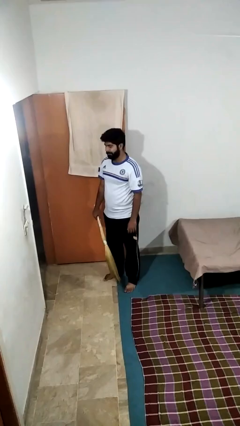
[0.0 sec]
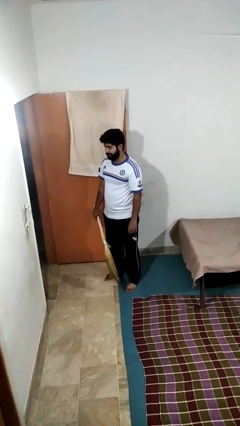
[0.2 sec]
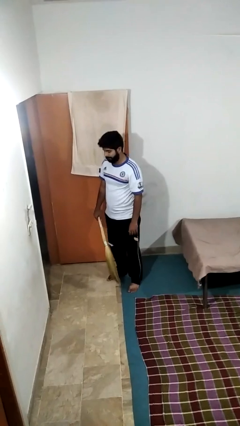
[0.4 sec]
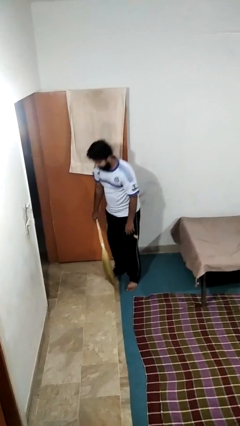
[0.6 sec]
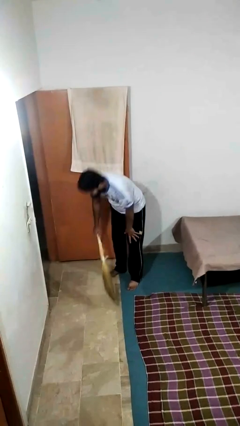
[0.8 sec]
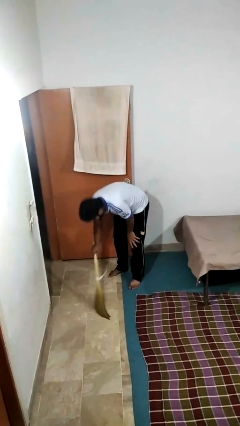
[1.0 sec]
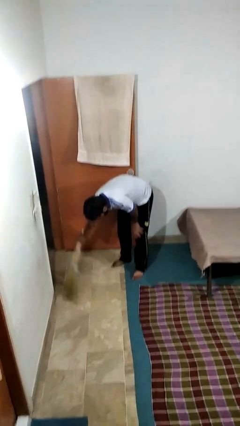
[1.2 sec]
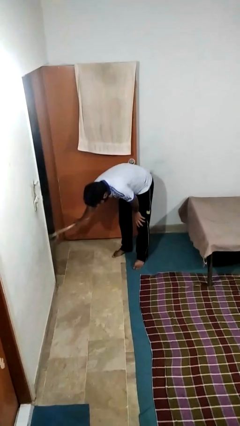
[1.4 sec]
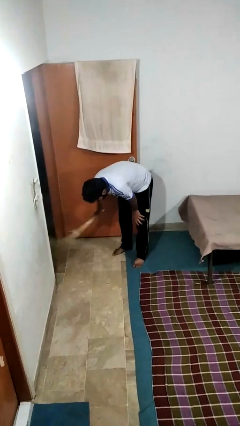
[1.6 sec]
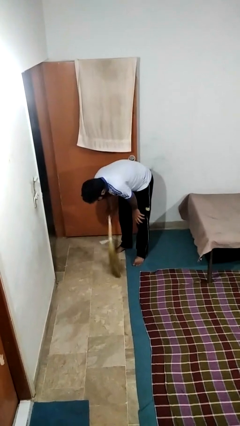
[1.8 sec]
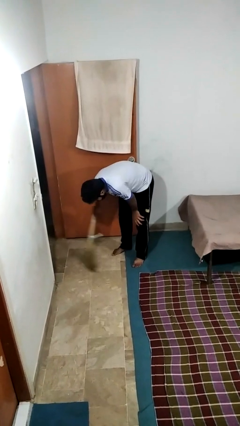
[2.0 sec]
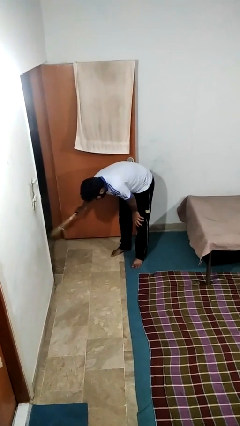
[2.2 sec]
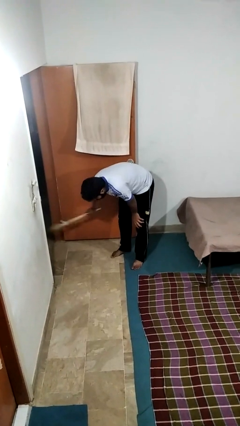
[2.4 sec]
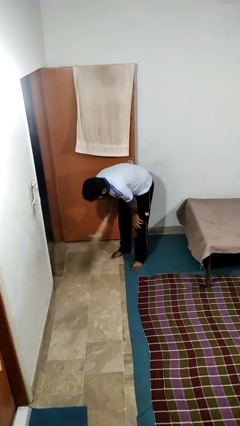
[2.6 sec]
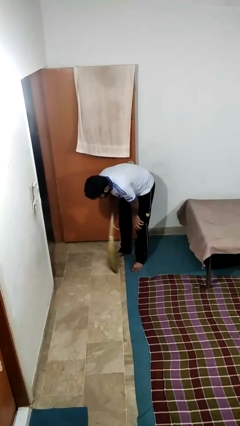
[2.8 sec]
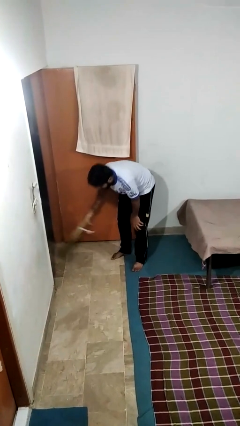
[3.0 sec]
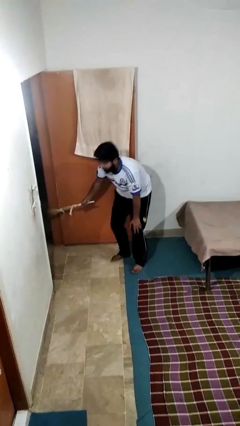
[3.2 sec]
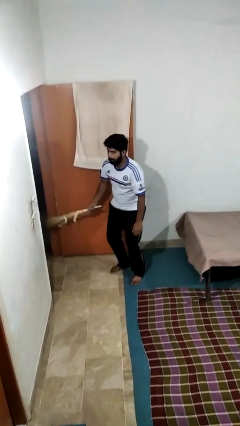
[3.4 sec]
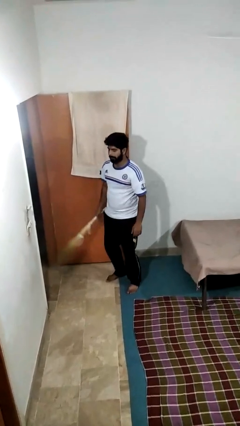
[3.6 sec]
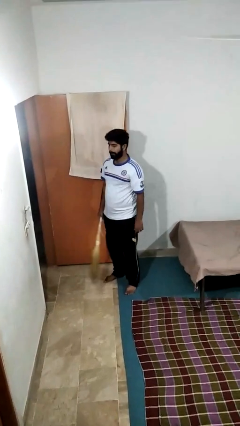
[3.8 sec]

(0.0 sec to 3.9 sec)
person sweeps floor

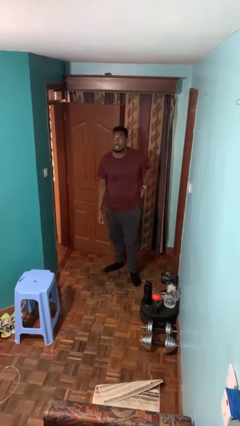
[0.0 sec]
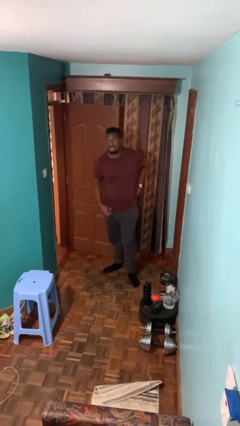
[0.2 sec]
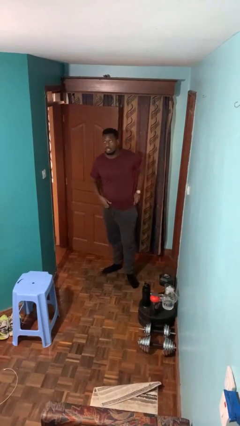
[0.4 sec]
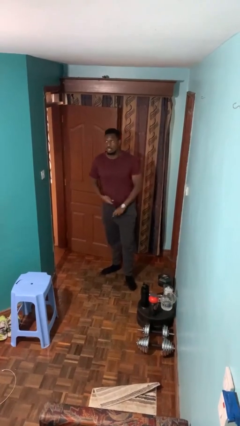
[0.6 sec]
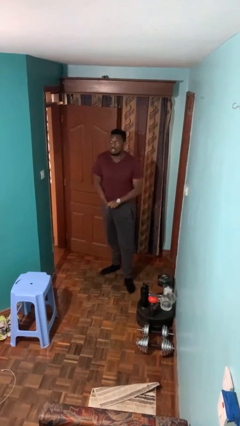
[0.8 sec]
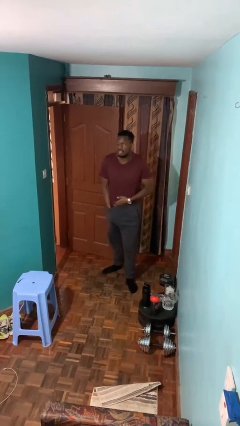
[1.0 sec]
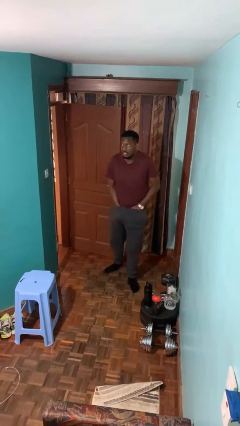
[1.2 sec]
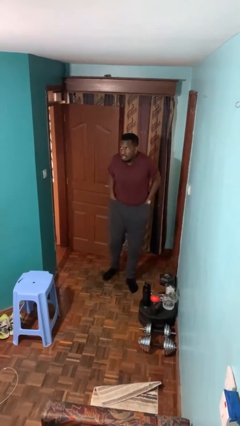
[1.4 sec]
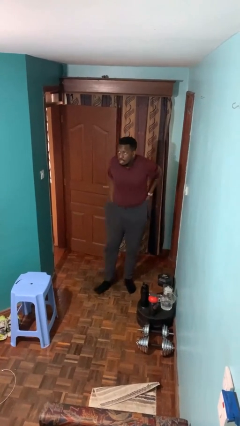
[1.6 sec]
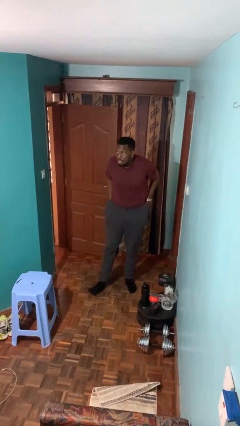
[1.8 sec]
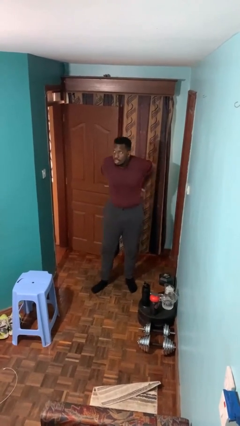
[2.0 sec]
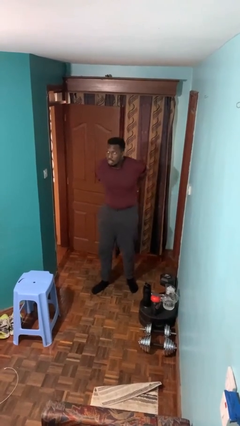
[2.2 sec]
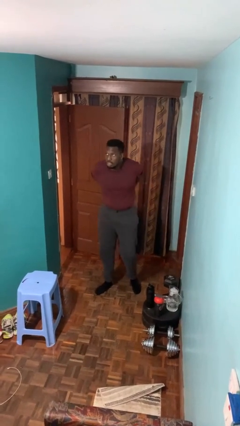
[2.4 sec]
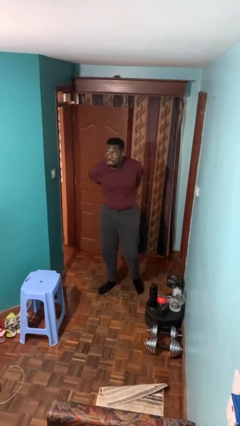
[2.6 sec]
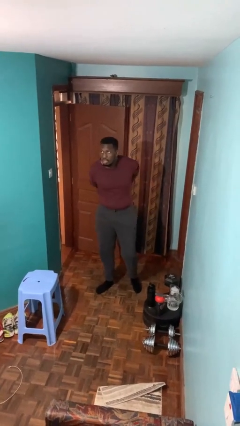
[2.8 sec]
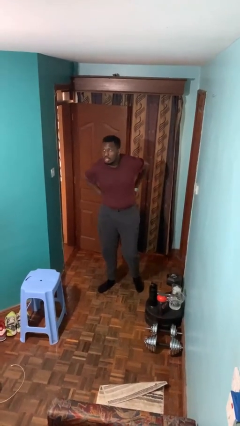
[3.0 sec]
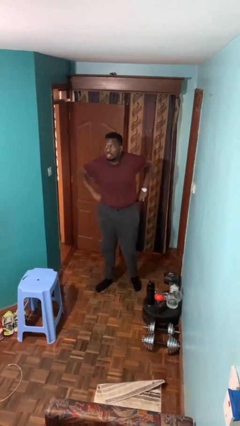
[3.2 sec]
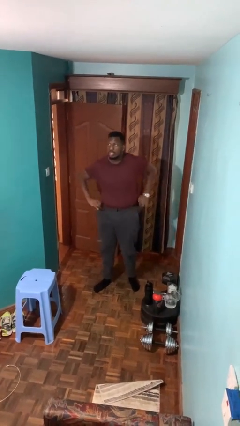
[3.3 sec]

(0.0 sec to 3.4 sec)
person tucks in shirt

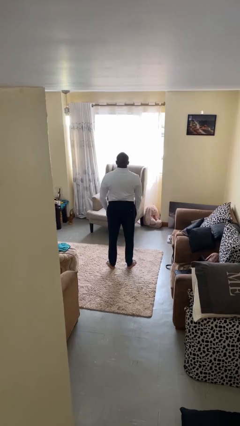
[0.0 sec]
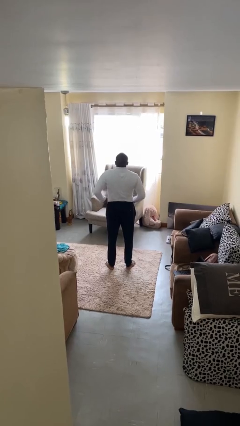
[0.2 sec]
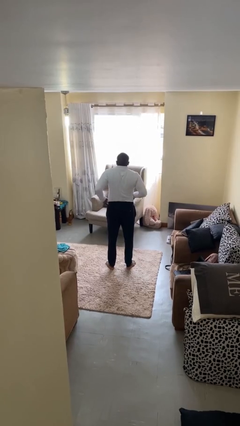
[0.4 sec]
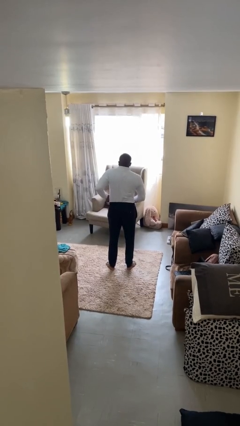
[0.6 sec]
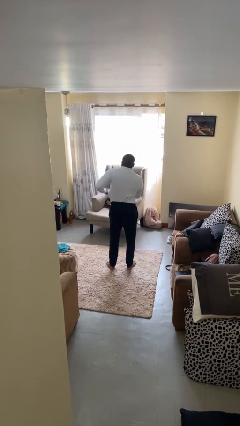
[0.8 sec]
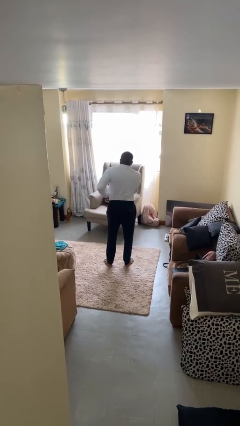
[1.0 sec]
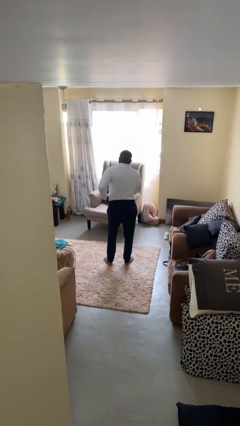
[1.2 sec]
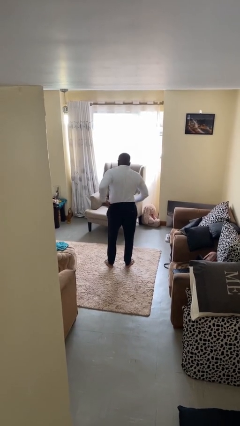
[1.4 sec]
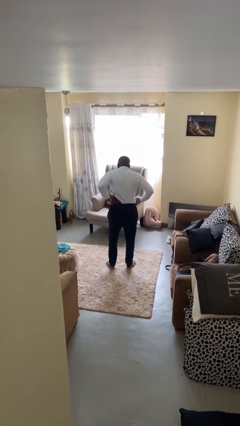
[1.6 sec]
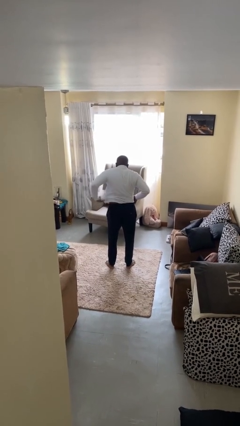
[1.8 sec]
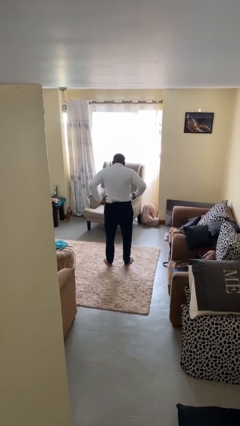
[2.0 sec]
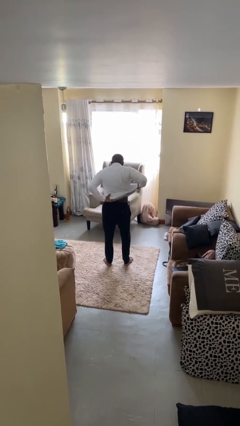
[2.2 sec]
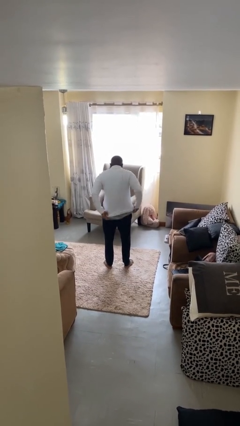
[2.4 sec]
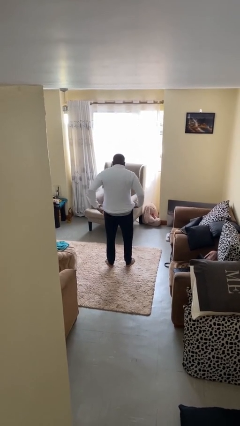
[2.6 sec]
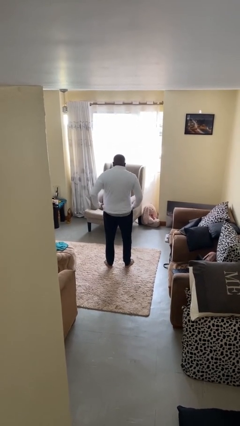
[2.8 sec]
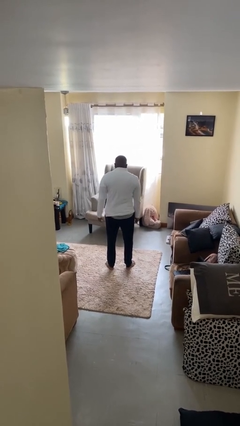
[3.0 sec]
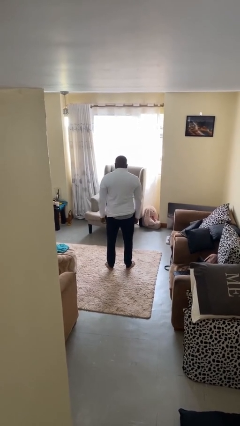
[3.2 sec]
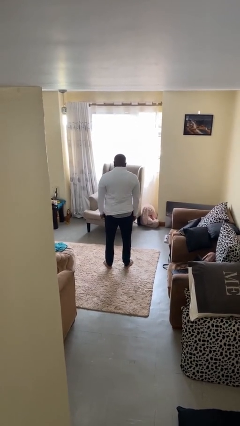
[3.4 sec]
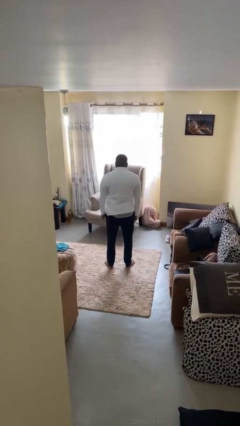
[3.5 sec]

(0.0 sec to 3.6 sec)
person untucks shirt

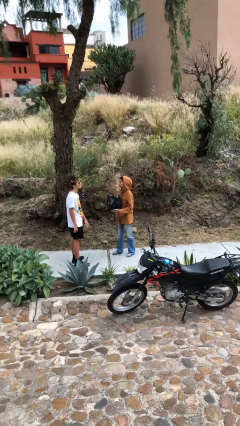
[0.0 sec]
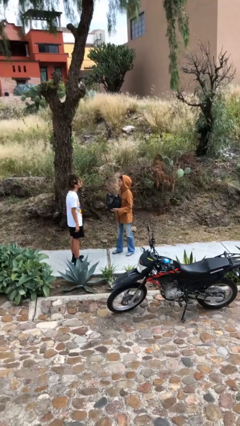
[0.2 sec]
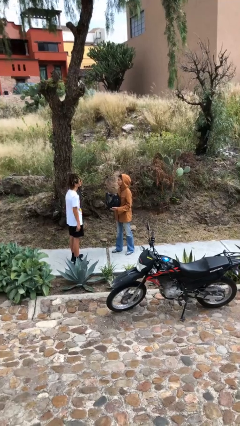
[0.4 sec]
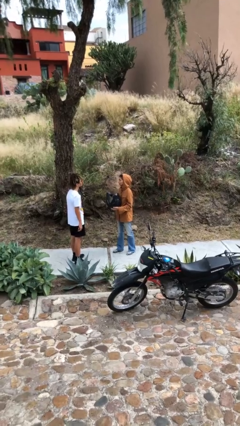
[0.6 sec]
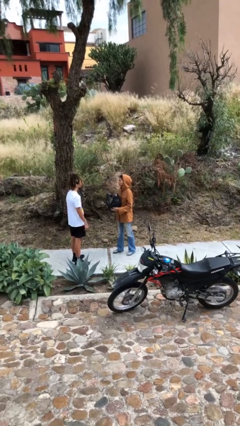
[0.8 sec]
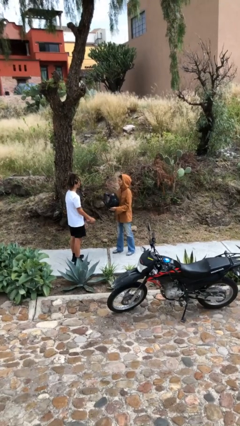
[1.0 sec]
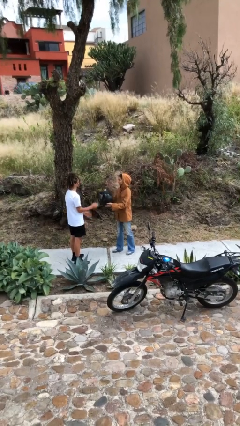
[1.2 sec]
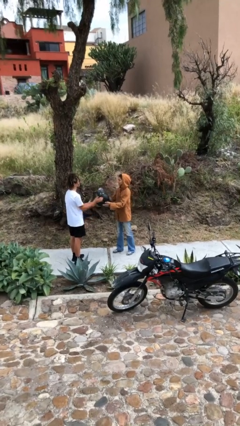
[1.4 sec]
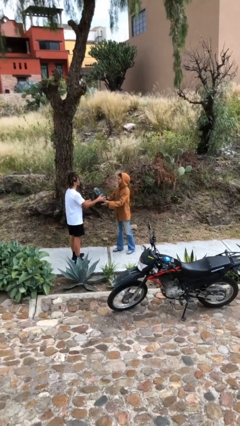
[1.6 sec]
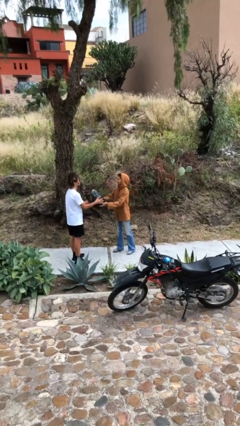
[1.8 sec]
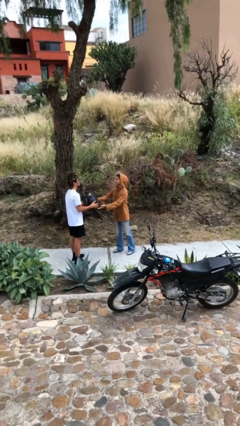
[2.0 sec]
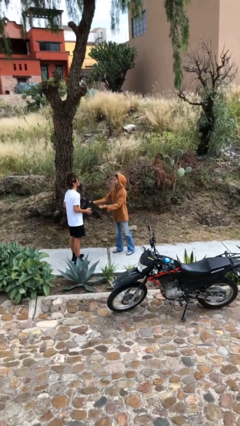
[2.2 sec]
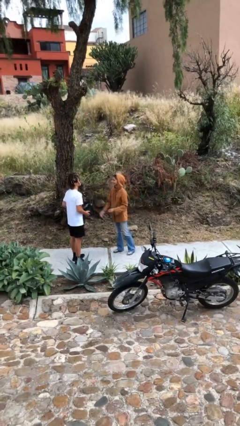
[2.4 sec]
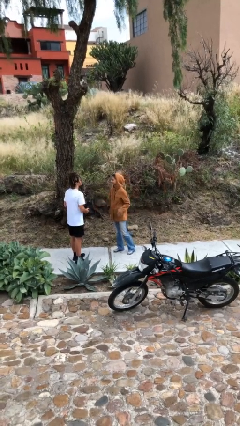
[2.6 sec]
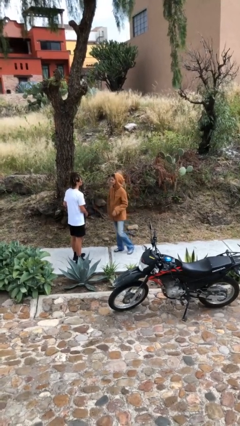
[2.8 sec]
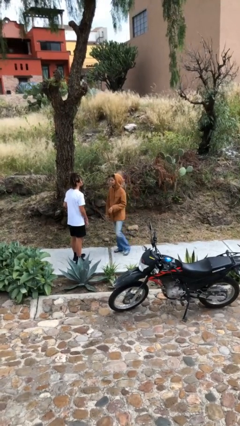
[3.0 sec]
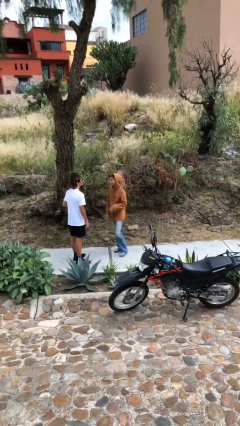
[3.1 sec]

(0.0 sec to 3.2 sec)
person transfers object to person

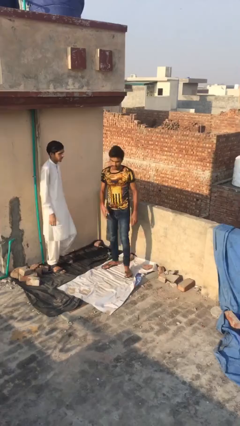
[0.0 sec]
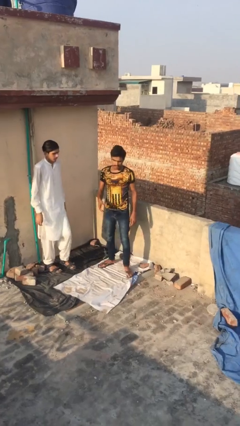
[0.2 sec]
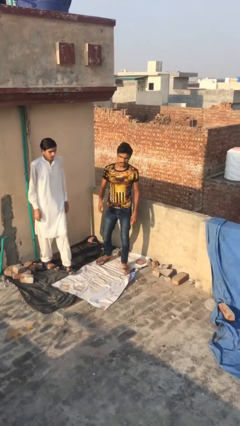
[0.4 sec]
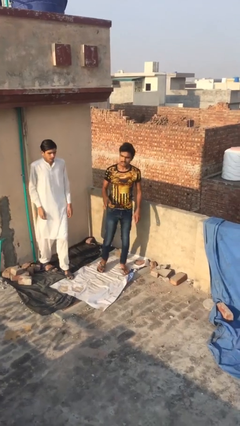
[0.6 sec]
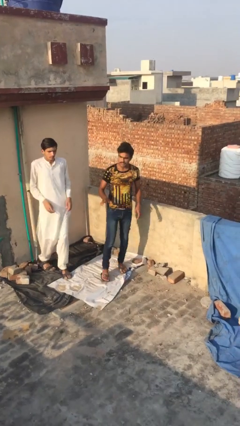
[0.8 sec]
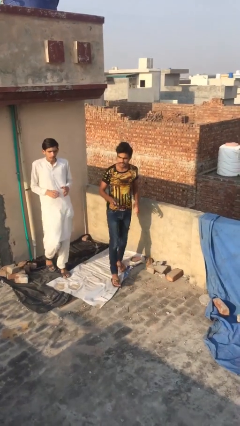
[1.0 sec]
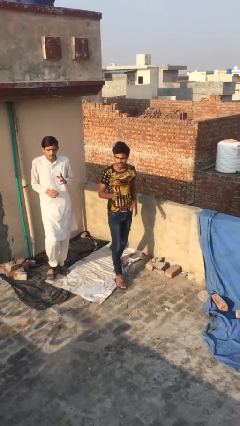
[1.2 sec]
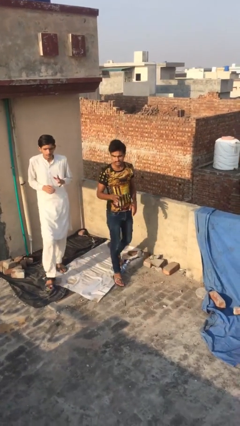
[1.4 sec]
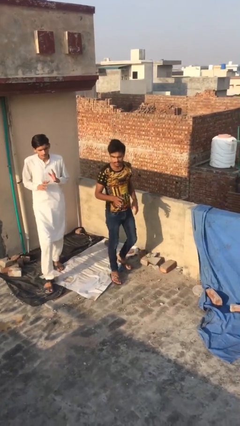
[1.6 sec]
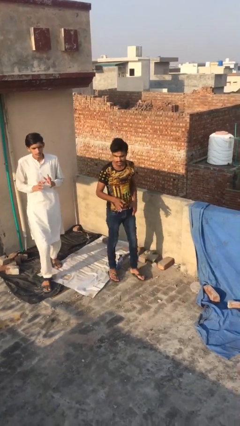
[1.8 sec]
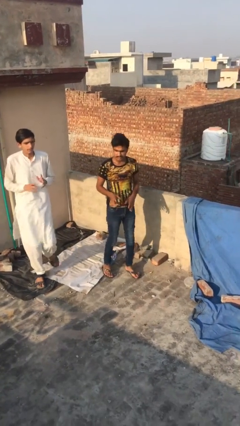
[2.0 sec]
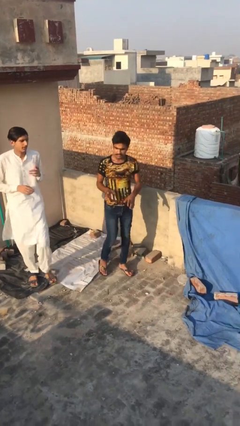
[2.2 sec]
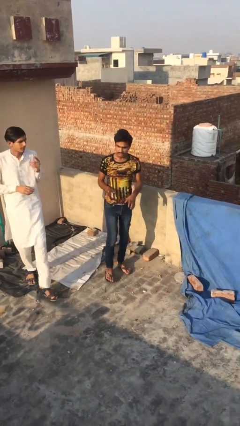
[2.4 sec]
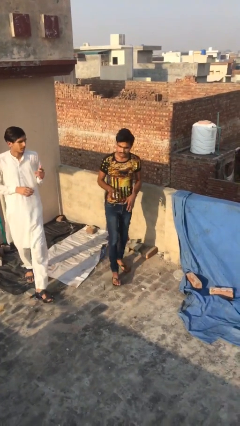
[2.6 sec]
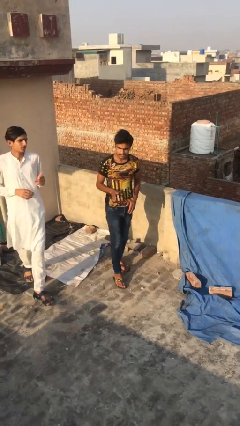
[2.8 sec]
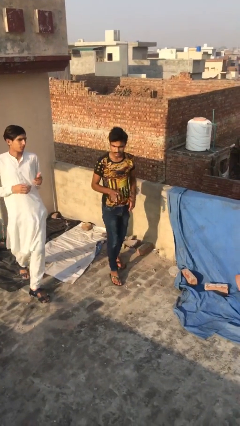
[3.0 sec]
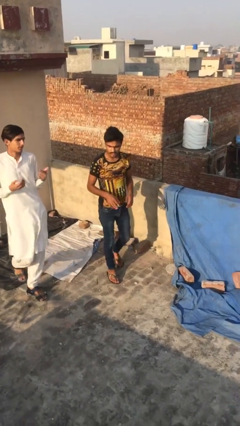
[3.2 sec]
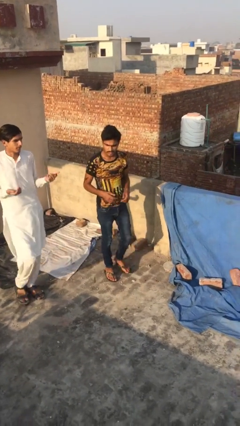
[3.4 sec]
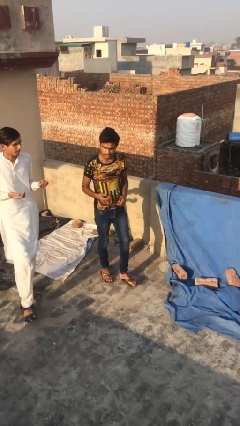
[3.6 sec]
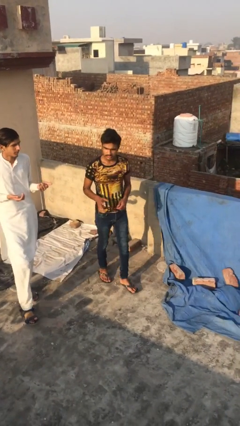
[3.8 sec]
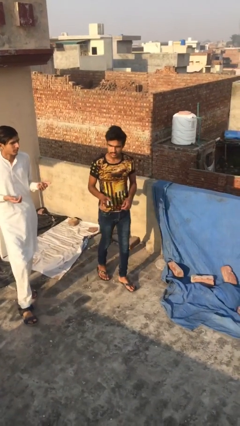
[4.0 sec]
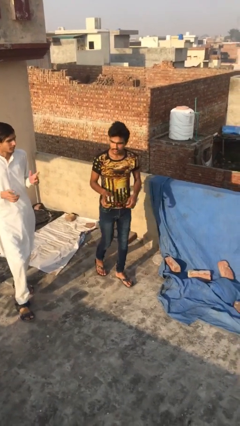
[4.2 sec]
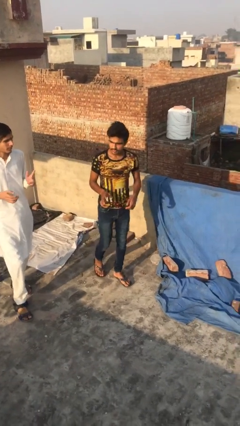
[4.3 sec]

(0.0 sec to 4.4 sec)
person talks to person
